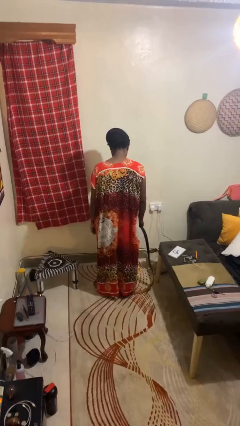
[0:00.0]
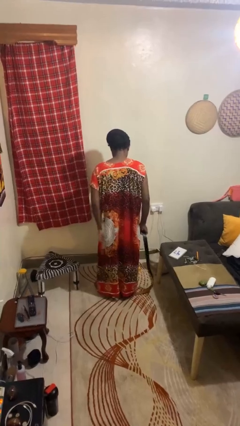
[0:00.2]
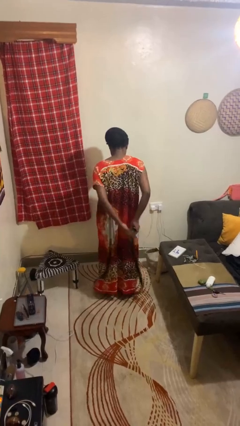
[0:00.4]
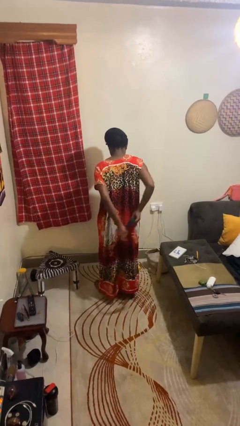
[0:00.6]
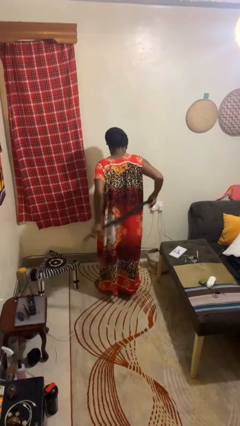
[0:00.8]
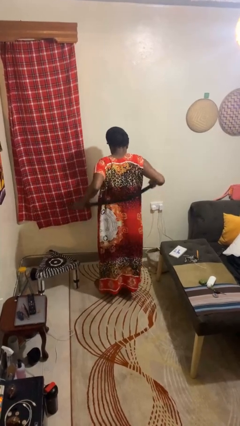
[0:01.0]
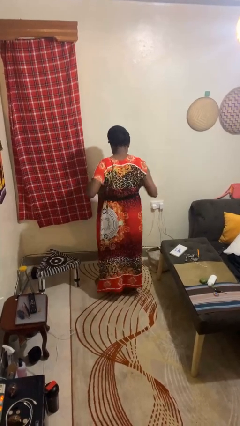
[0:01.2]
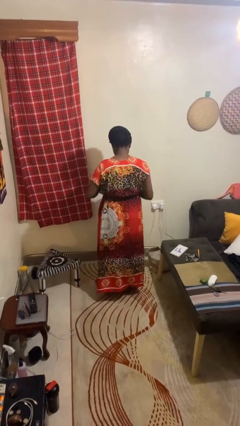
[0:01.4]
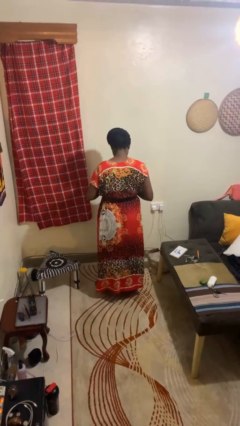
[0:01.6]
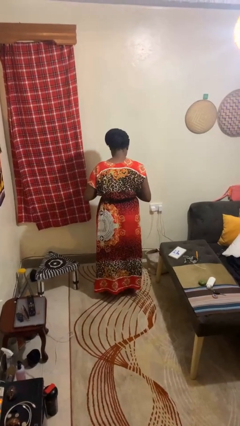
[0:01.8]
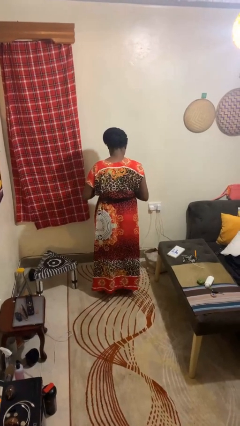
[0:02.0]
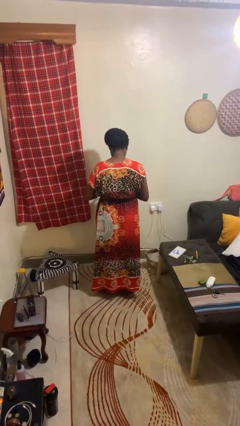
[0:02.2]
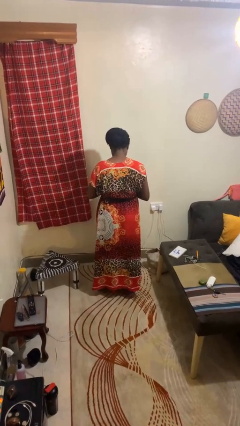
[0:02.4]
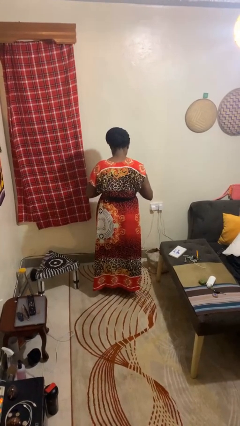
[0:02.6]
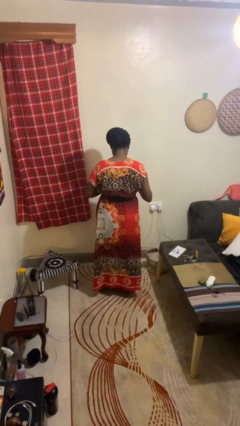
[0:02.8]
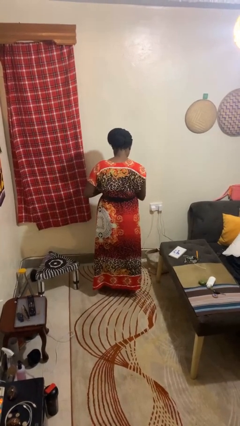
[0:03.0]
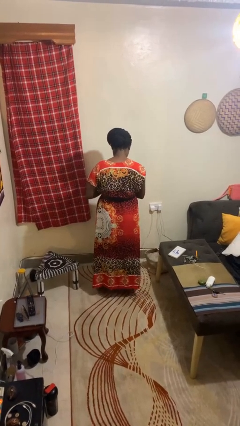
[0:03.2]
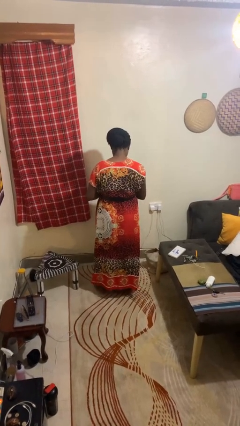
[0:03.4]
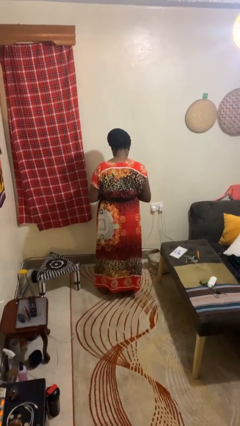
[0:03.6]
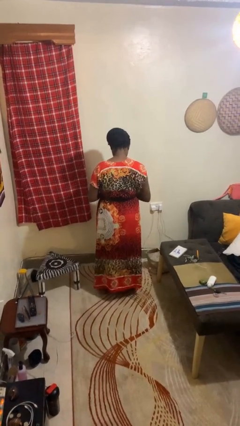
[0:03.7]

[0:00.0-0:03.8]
person puts on belt

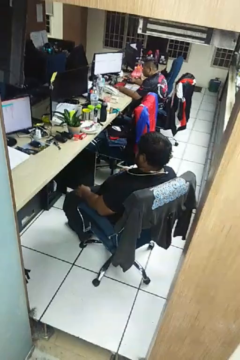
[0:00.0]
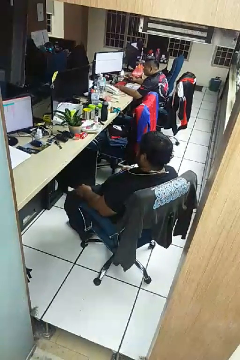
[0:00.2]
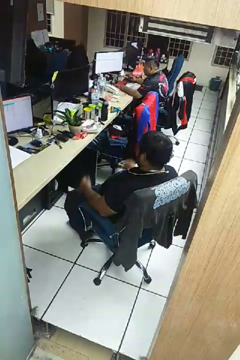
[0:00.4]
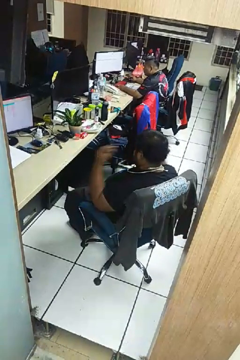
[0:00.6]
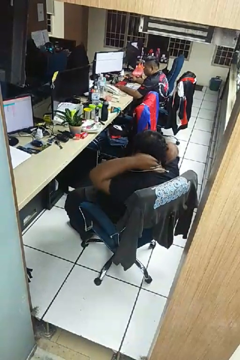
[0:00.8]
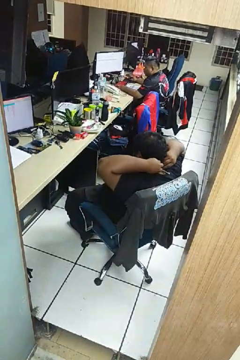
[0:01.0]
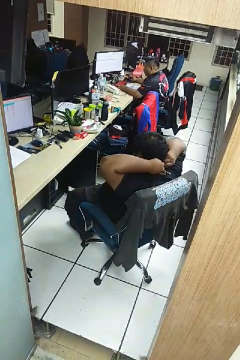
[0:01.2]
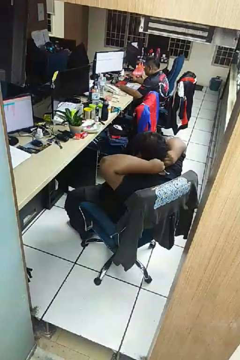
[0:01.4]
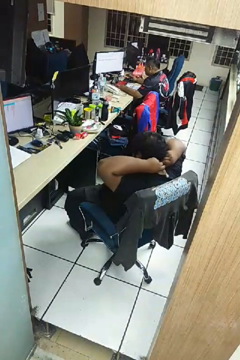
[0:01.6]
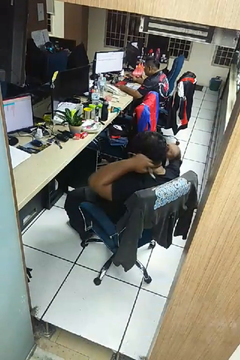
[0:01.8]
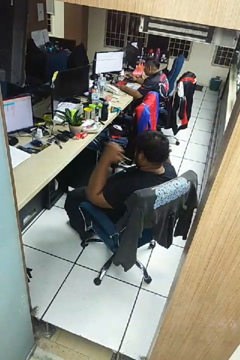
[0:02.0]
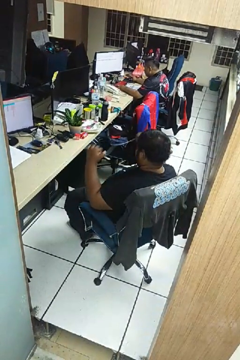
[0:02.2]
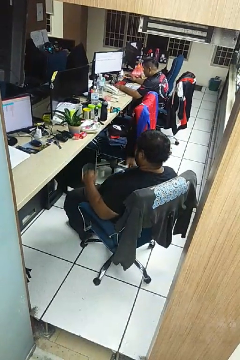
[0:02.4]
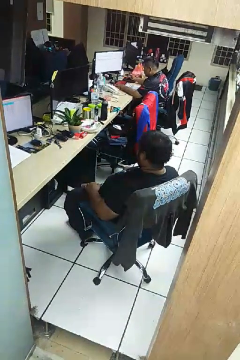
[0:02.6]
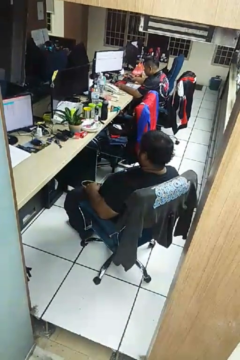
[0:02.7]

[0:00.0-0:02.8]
person takes off necklace

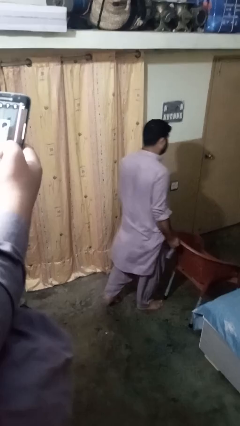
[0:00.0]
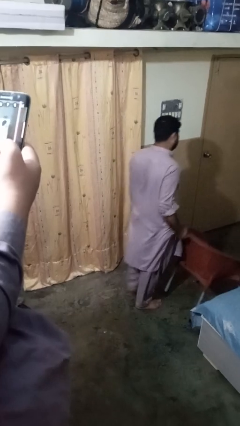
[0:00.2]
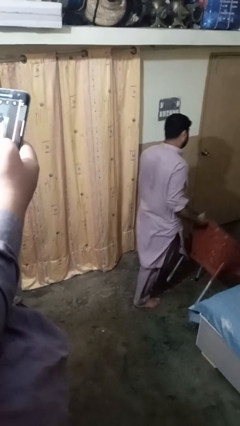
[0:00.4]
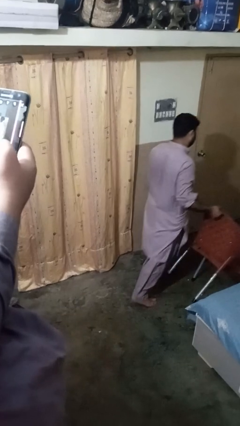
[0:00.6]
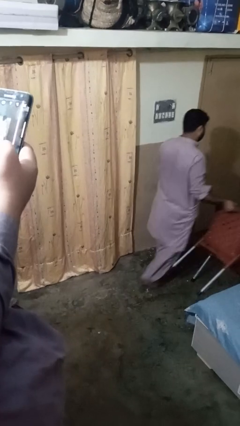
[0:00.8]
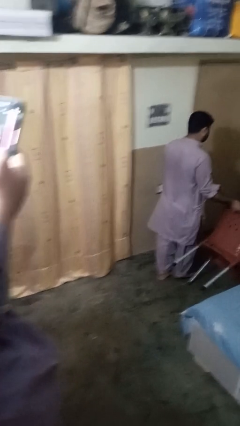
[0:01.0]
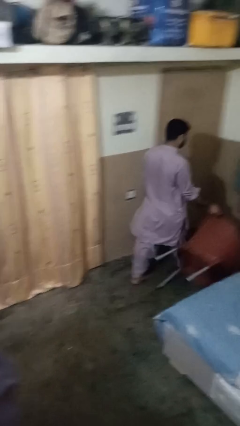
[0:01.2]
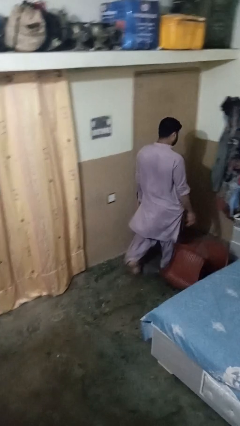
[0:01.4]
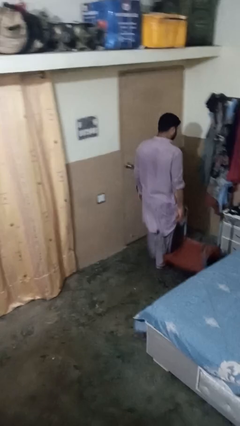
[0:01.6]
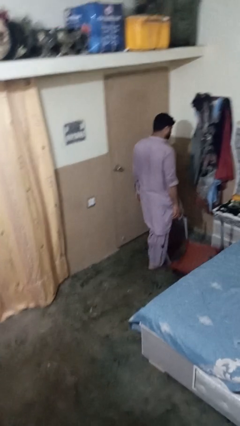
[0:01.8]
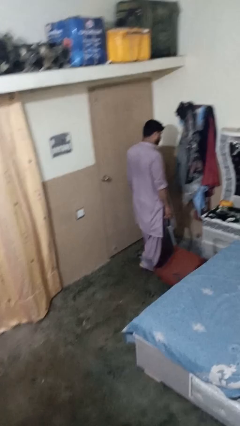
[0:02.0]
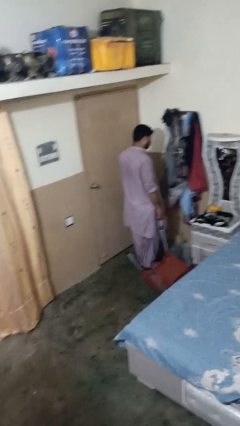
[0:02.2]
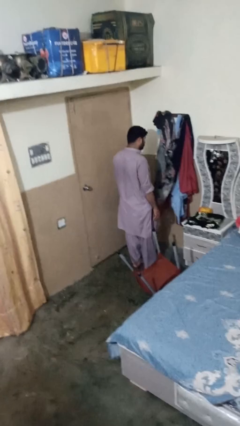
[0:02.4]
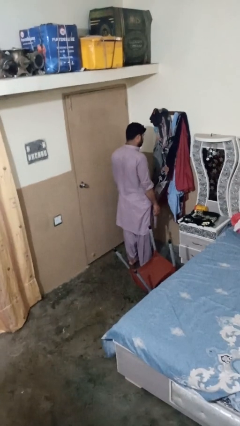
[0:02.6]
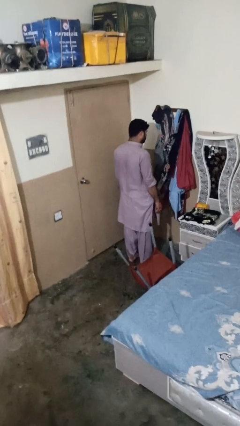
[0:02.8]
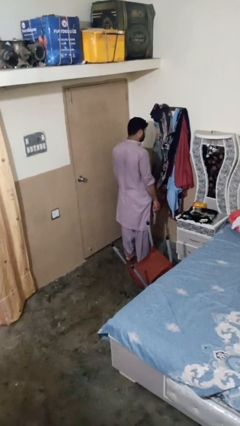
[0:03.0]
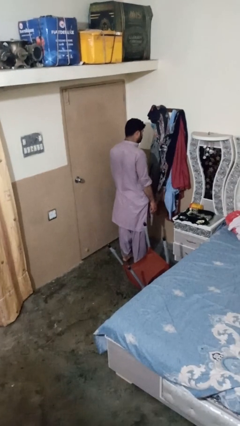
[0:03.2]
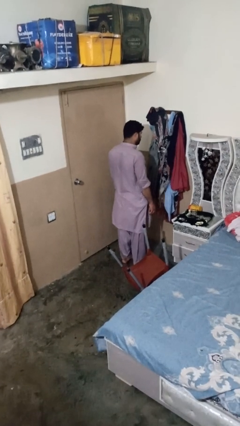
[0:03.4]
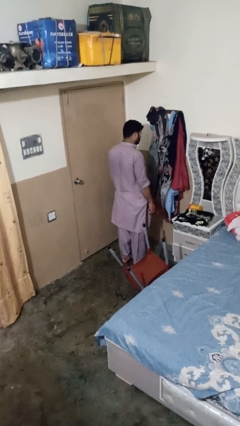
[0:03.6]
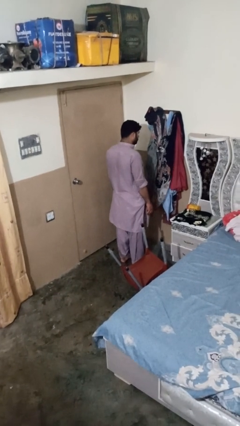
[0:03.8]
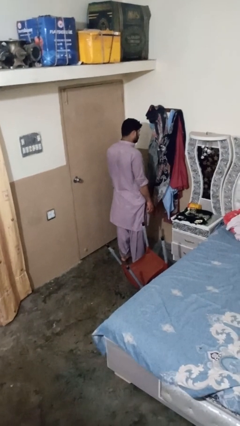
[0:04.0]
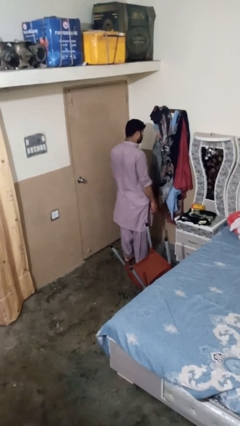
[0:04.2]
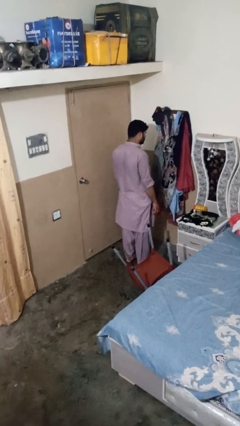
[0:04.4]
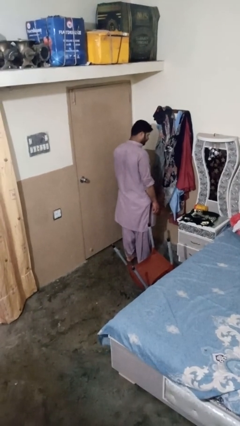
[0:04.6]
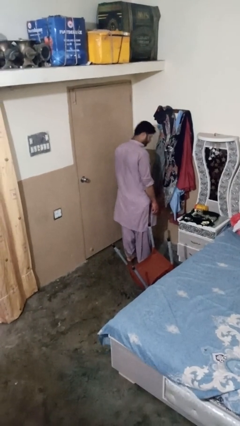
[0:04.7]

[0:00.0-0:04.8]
person knocks over furniture

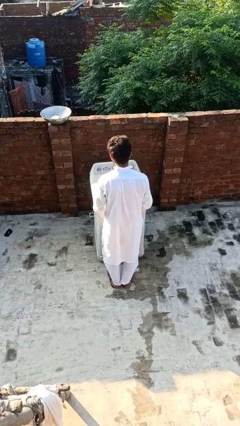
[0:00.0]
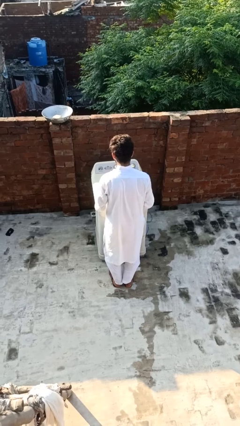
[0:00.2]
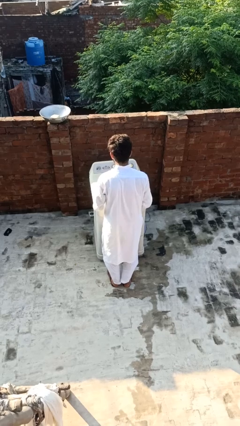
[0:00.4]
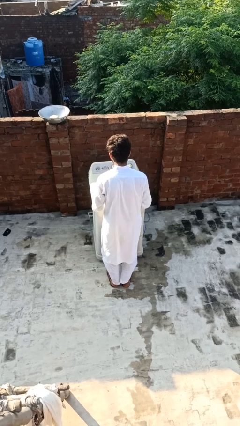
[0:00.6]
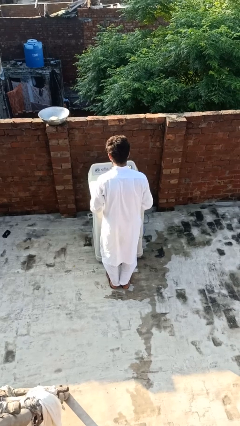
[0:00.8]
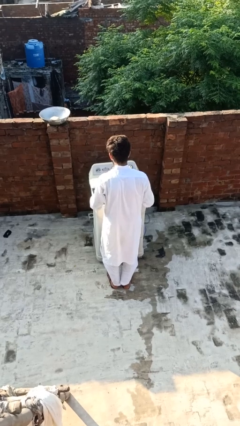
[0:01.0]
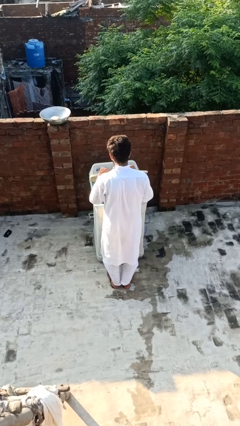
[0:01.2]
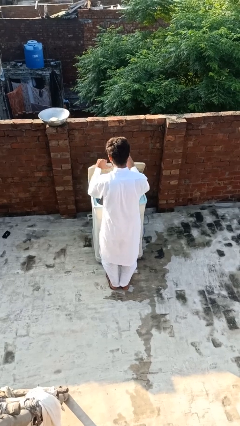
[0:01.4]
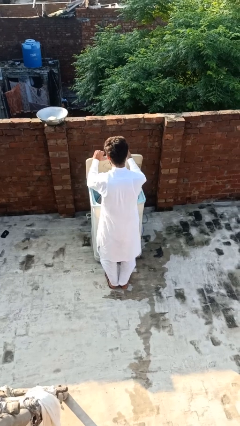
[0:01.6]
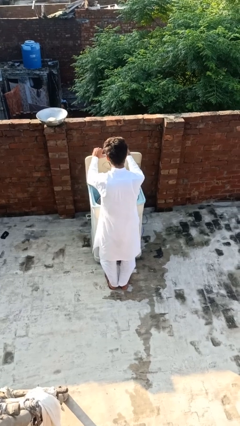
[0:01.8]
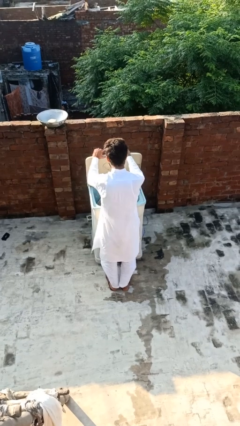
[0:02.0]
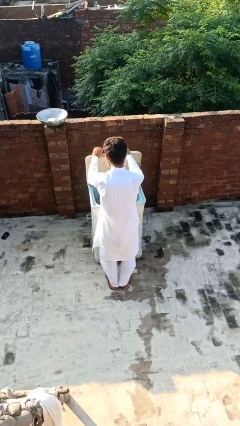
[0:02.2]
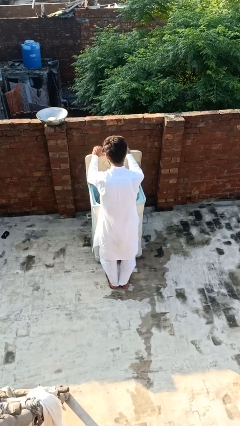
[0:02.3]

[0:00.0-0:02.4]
person opens clothes washer

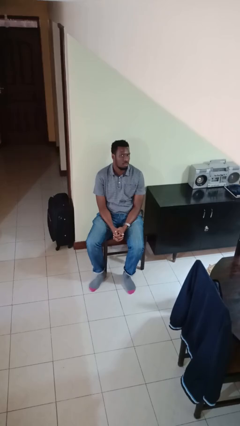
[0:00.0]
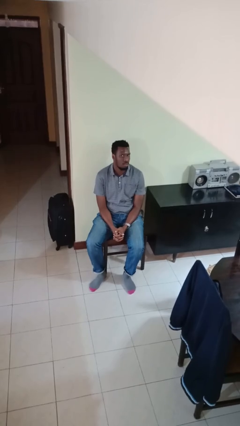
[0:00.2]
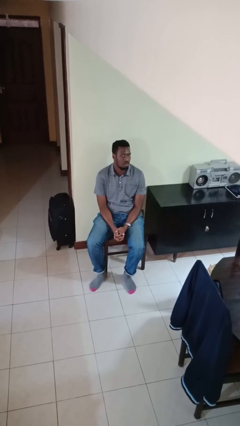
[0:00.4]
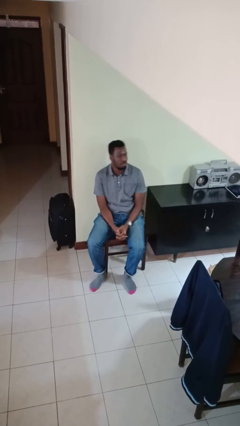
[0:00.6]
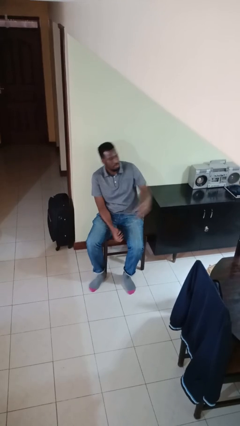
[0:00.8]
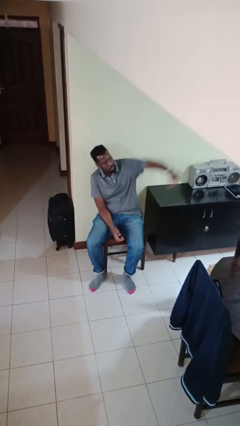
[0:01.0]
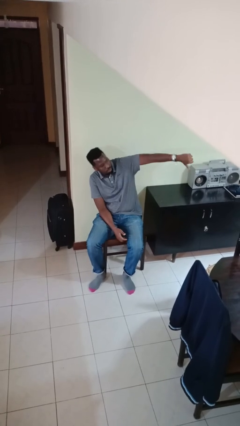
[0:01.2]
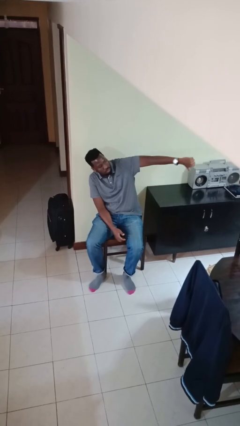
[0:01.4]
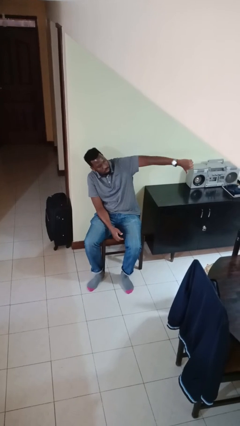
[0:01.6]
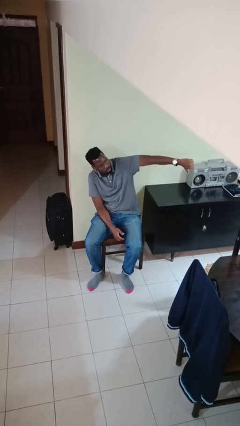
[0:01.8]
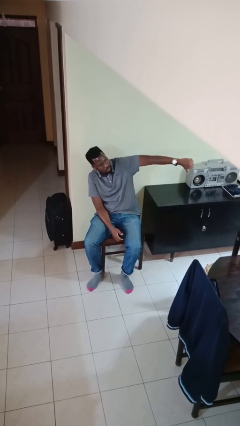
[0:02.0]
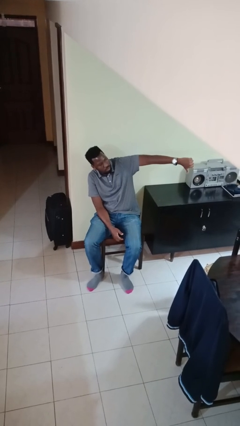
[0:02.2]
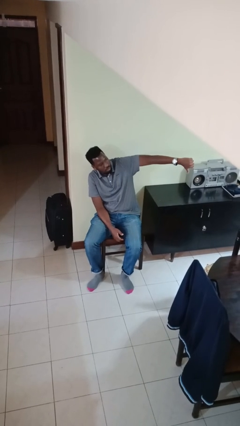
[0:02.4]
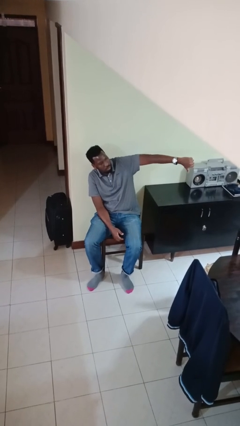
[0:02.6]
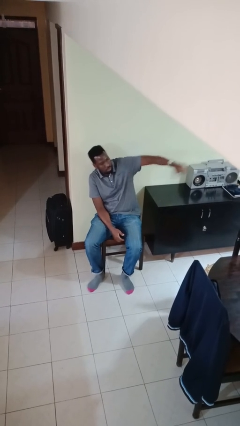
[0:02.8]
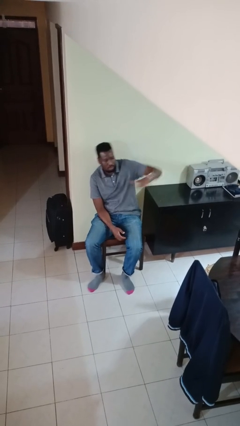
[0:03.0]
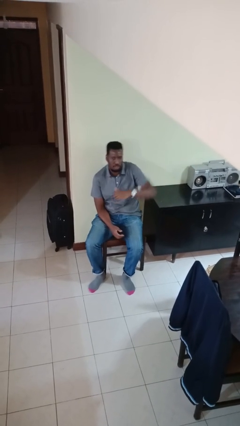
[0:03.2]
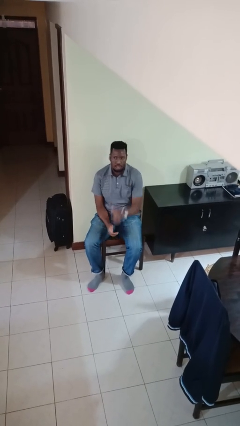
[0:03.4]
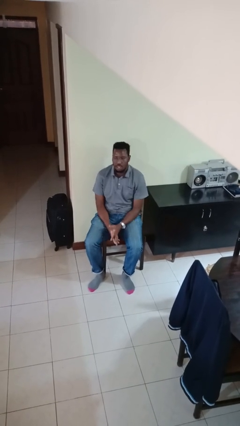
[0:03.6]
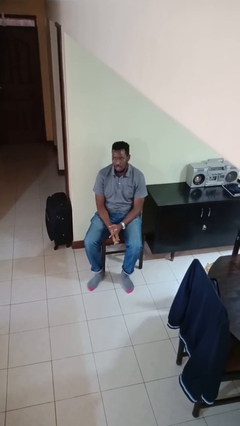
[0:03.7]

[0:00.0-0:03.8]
person gestures thumbs down

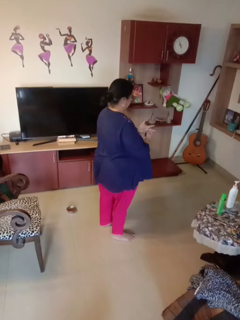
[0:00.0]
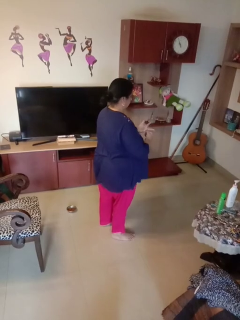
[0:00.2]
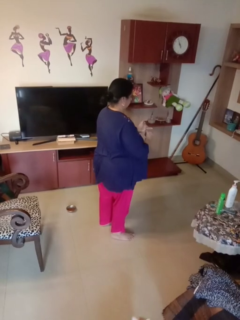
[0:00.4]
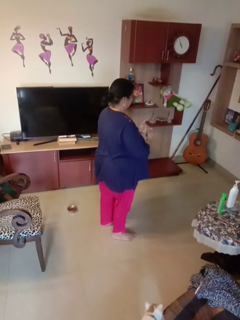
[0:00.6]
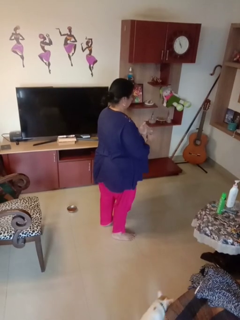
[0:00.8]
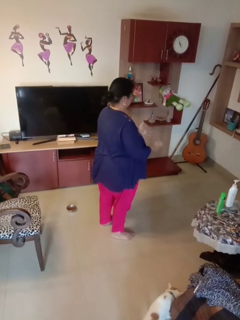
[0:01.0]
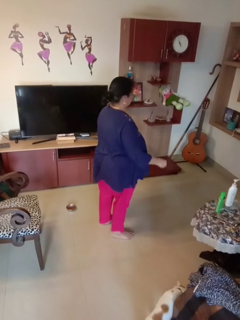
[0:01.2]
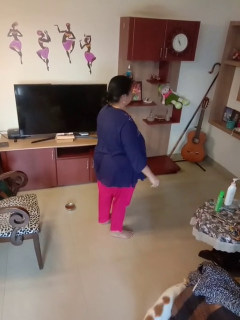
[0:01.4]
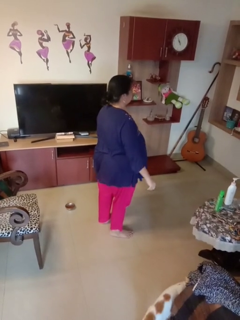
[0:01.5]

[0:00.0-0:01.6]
person takes off ring
